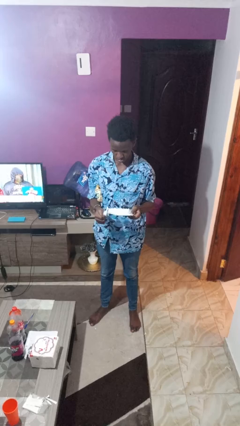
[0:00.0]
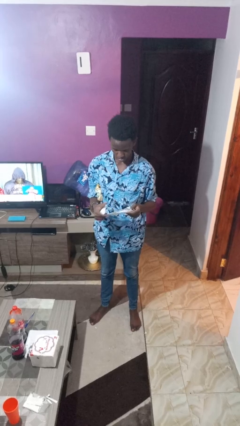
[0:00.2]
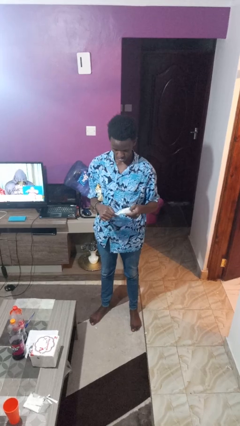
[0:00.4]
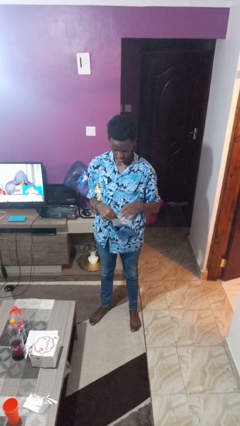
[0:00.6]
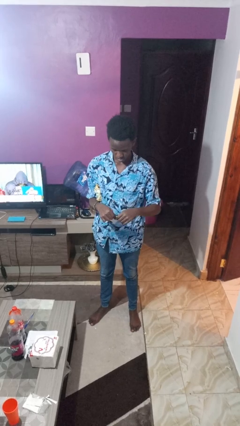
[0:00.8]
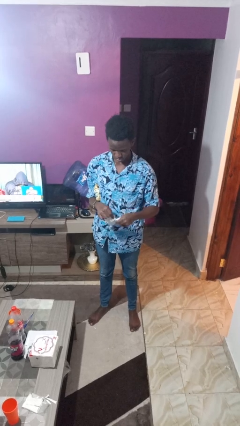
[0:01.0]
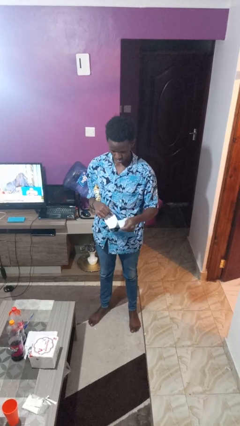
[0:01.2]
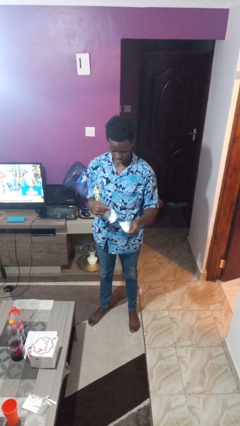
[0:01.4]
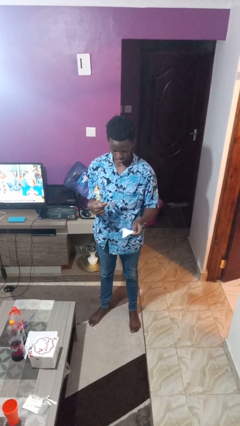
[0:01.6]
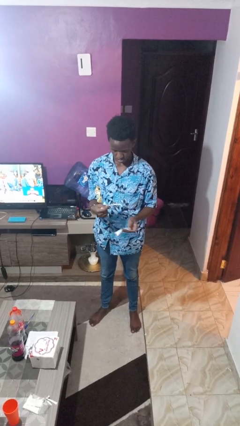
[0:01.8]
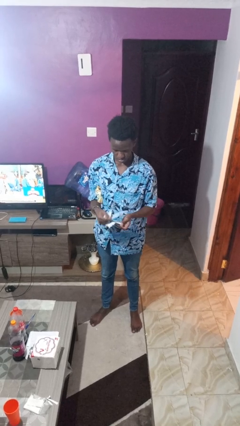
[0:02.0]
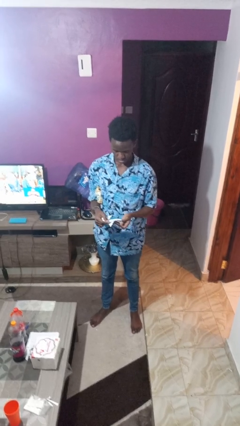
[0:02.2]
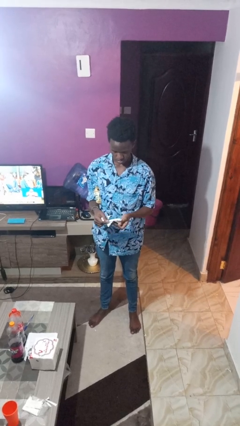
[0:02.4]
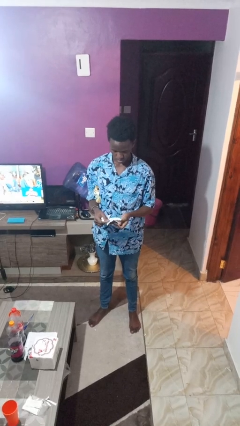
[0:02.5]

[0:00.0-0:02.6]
person tears paper

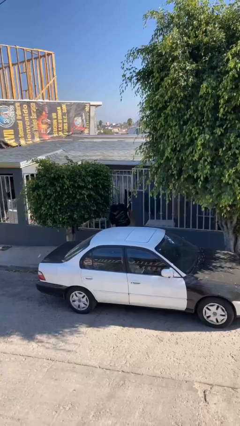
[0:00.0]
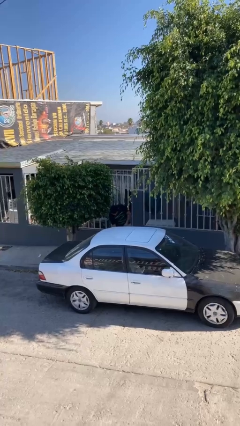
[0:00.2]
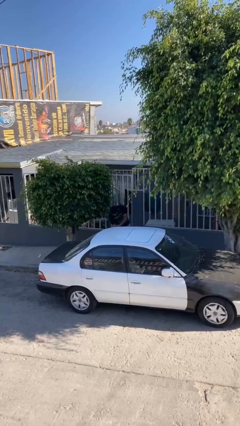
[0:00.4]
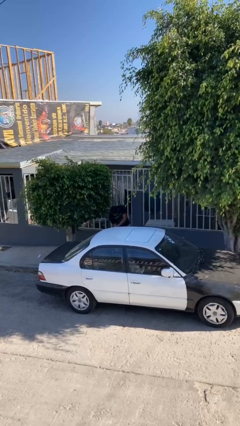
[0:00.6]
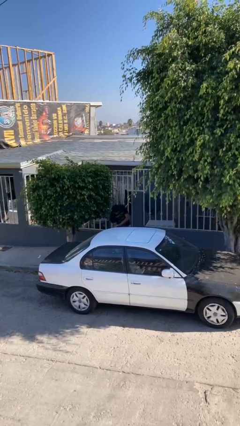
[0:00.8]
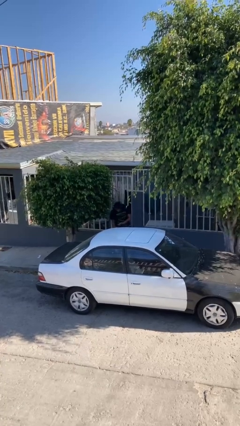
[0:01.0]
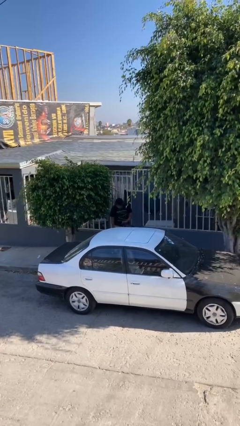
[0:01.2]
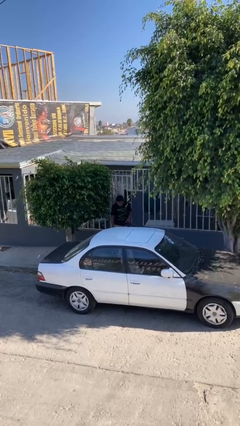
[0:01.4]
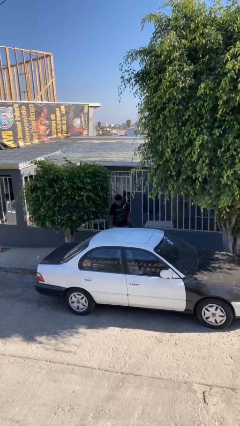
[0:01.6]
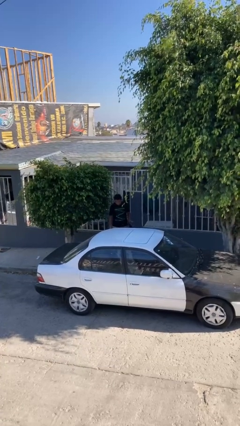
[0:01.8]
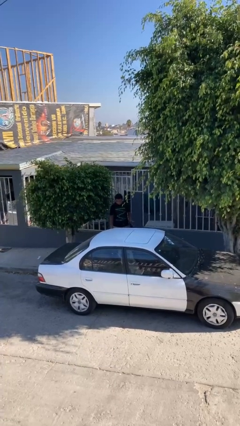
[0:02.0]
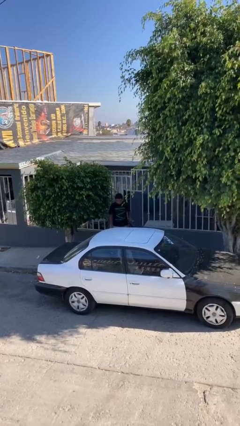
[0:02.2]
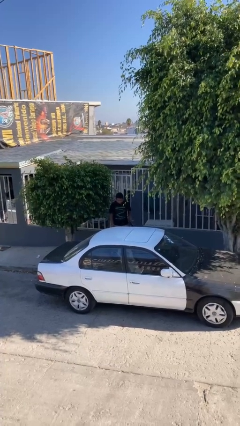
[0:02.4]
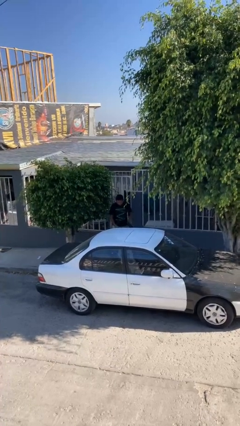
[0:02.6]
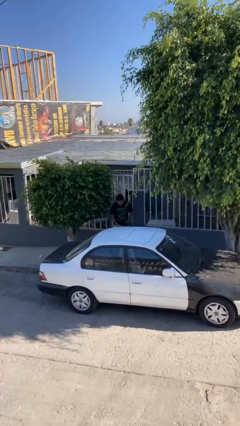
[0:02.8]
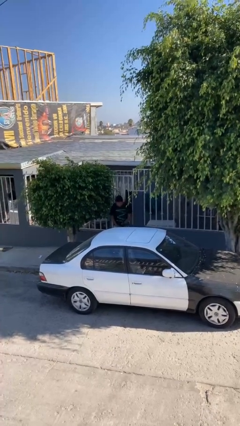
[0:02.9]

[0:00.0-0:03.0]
person opens car door

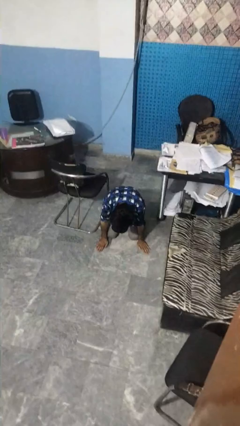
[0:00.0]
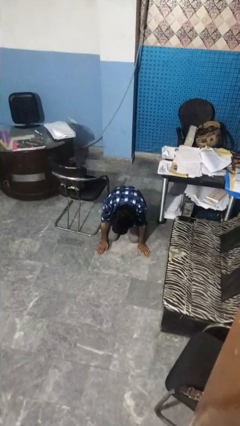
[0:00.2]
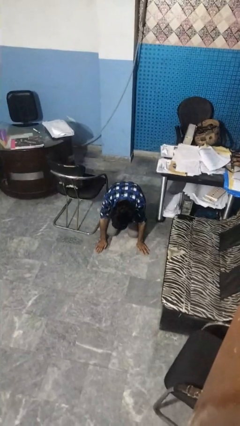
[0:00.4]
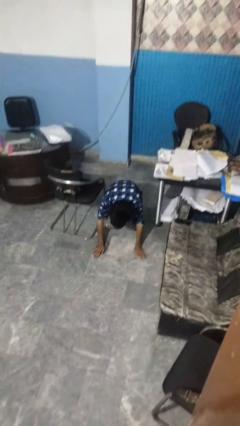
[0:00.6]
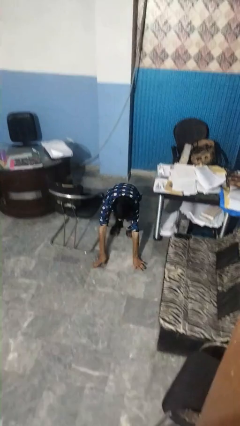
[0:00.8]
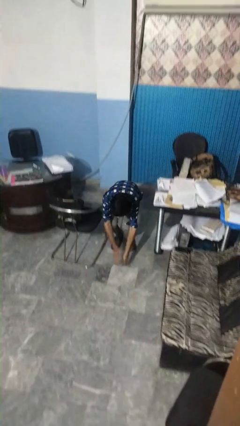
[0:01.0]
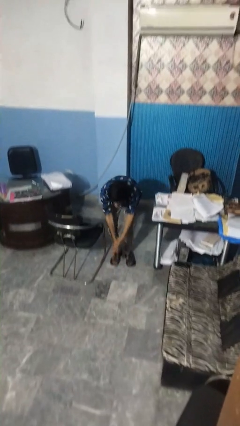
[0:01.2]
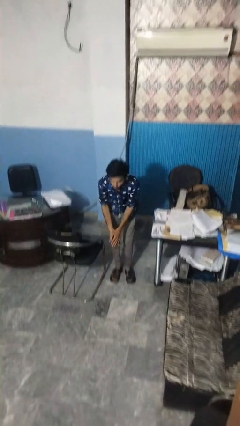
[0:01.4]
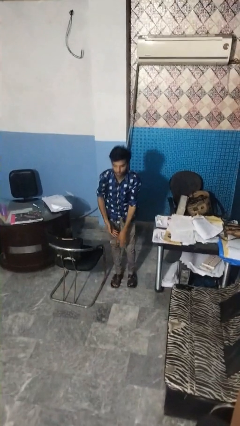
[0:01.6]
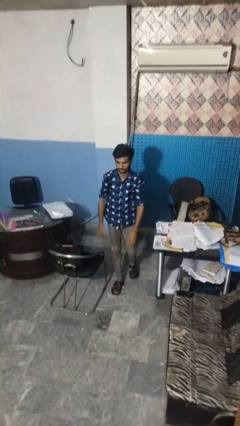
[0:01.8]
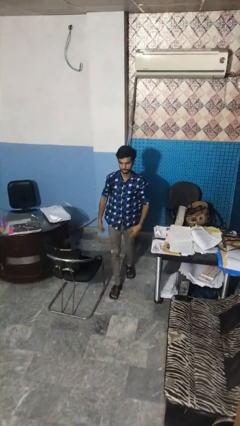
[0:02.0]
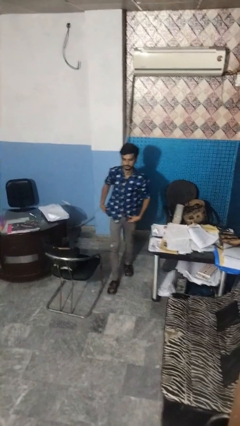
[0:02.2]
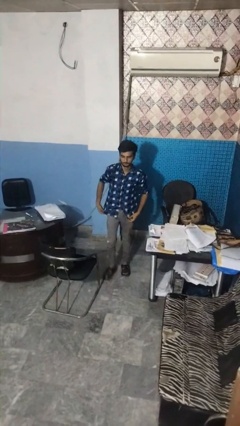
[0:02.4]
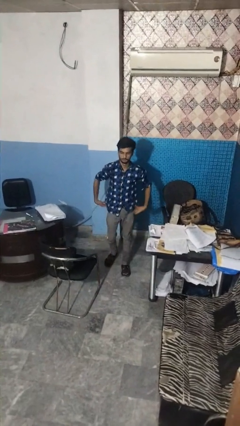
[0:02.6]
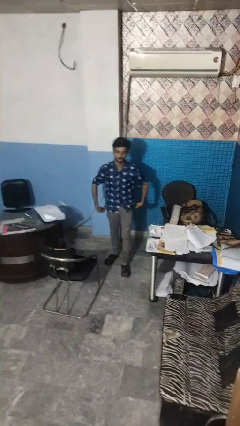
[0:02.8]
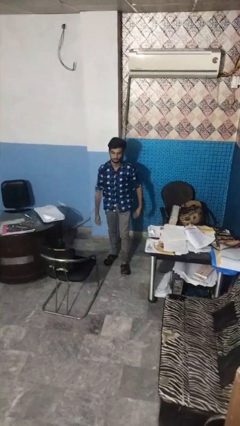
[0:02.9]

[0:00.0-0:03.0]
person stands up from floor

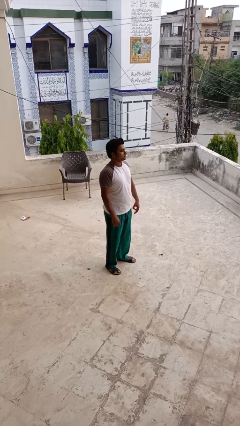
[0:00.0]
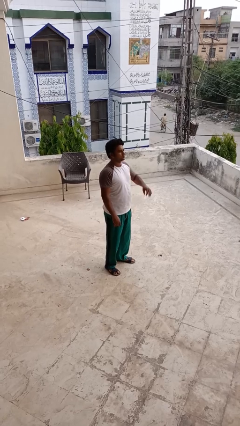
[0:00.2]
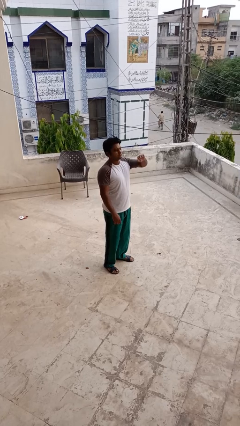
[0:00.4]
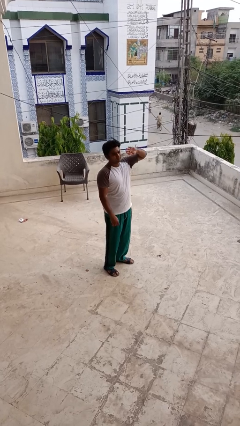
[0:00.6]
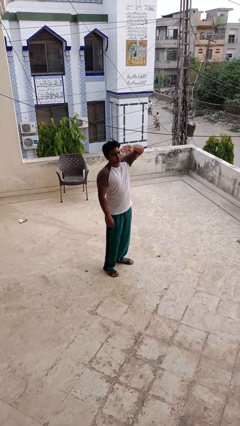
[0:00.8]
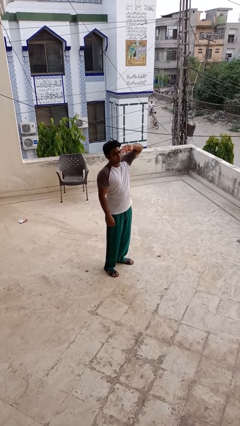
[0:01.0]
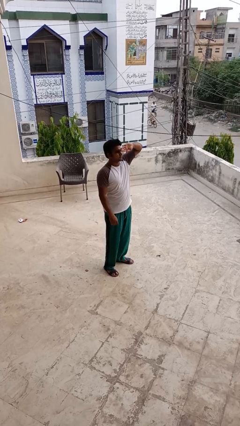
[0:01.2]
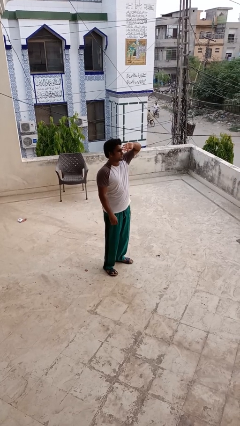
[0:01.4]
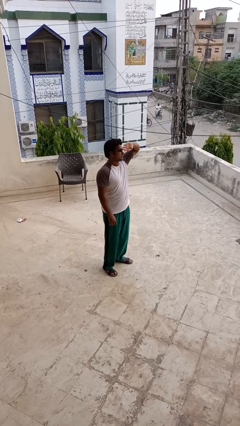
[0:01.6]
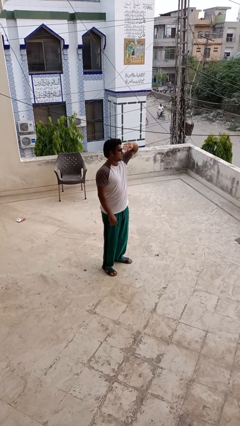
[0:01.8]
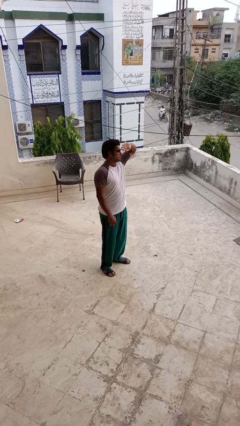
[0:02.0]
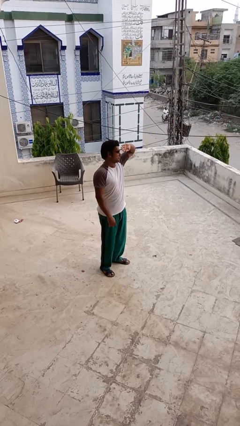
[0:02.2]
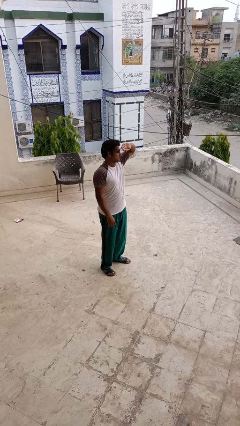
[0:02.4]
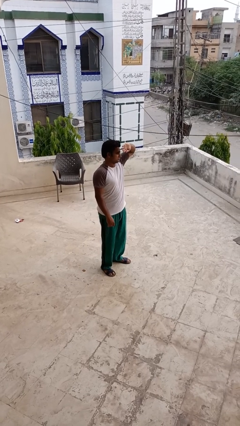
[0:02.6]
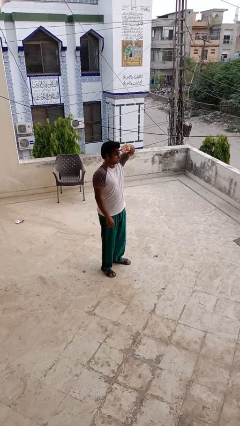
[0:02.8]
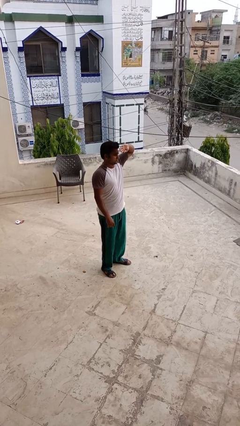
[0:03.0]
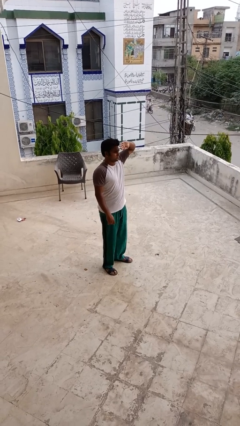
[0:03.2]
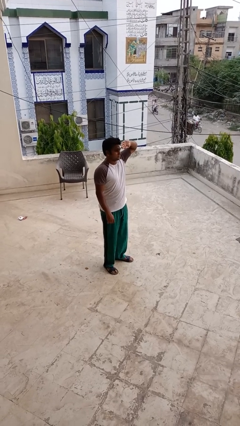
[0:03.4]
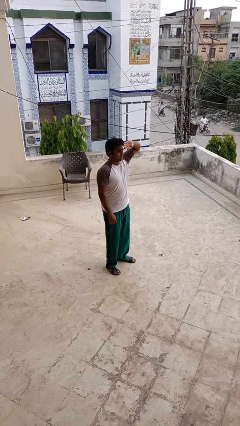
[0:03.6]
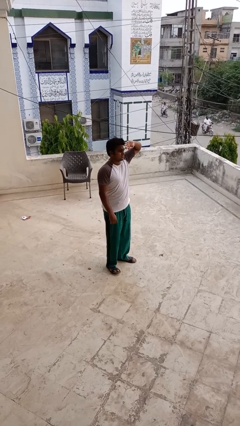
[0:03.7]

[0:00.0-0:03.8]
person shades eyes

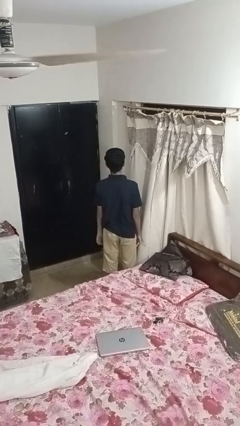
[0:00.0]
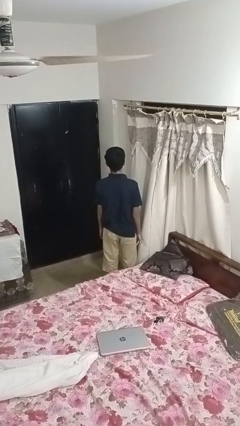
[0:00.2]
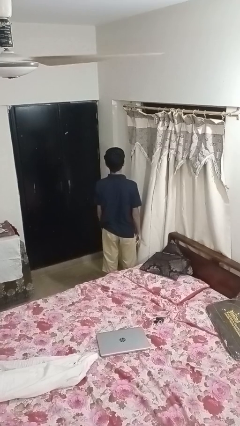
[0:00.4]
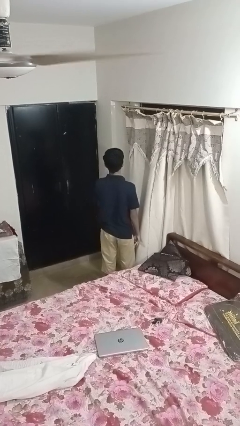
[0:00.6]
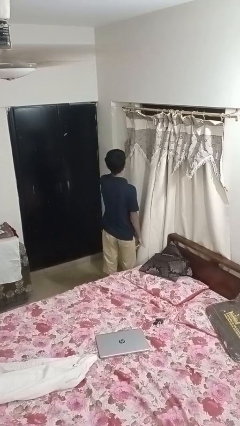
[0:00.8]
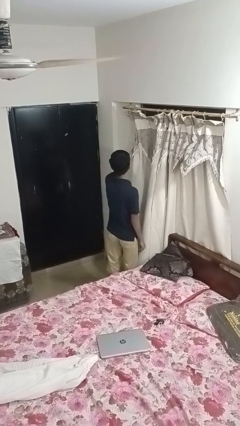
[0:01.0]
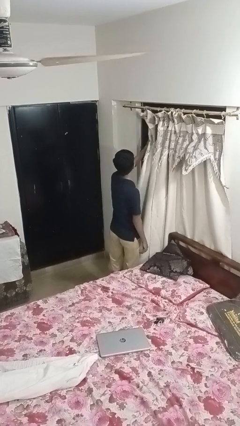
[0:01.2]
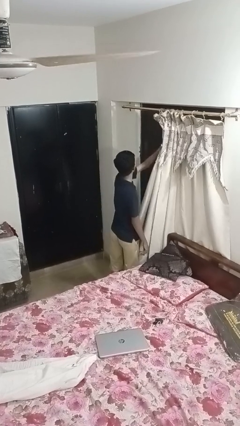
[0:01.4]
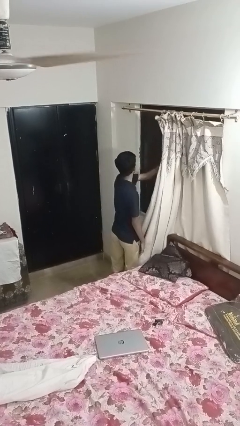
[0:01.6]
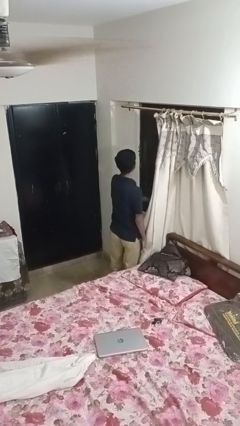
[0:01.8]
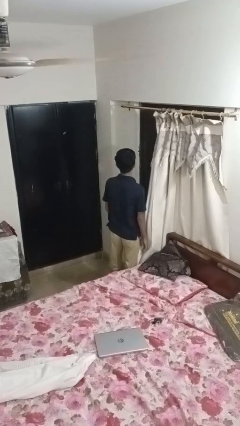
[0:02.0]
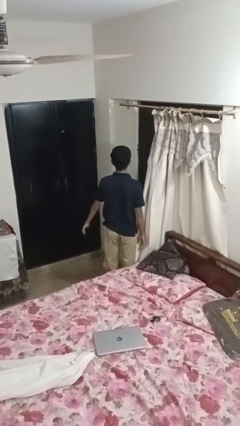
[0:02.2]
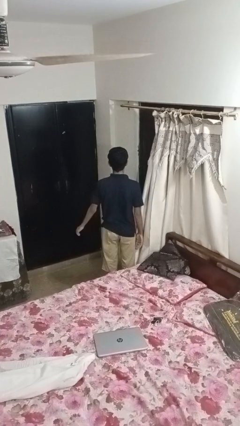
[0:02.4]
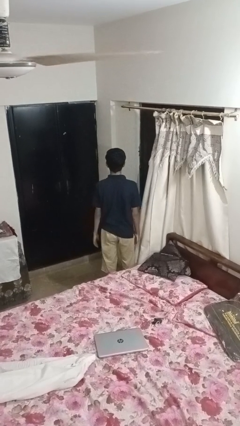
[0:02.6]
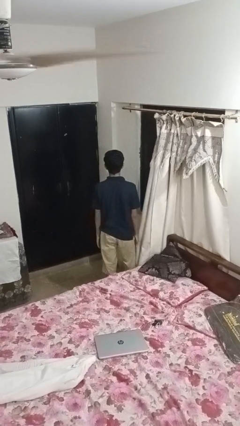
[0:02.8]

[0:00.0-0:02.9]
person opens curtains

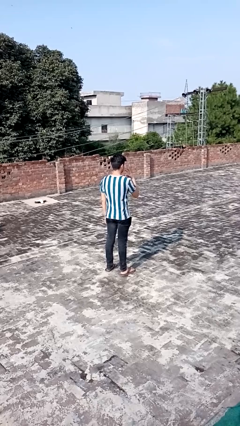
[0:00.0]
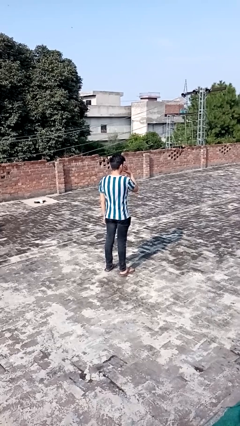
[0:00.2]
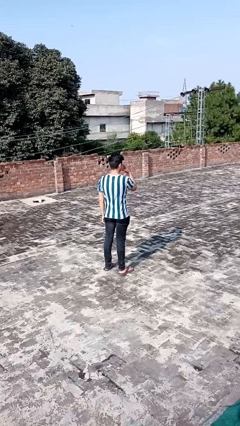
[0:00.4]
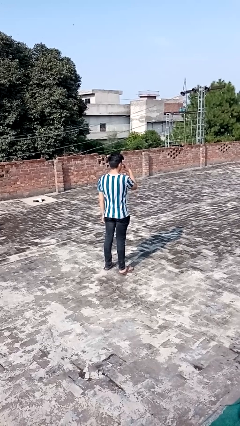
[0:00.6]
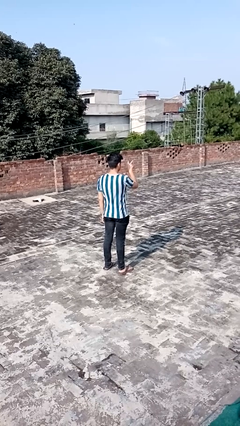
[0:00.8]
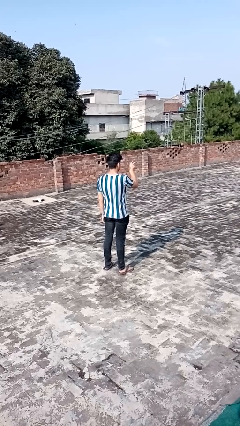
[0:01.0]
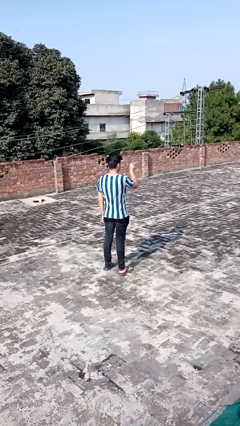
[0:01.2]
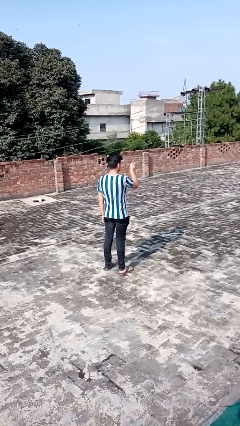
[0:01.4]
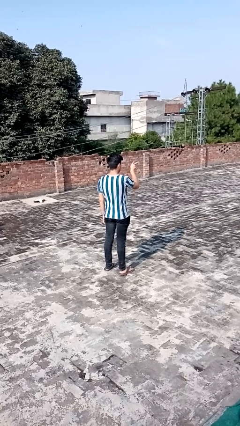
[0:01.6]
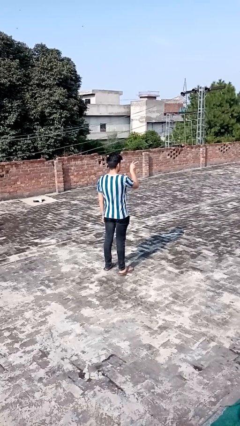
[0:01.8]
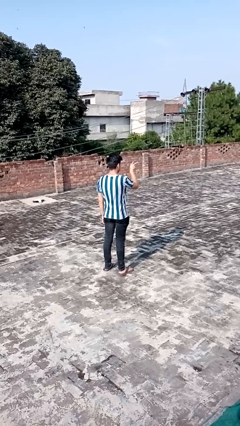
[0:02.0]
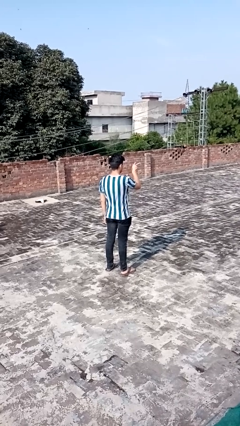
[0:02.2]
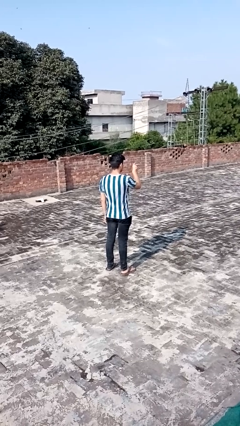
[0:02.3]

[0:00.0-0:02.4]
person gestures watch closely
